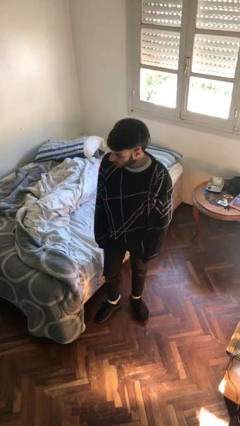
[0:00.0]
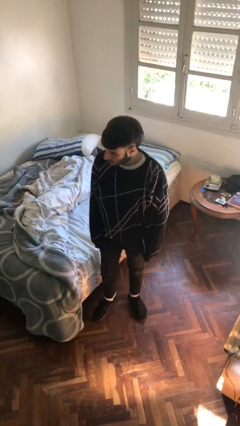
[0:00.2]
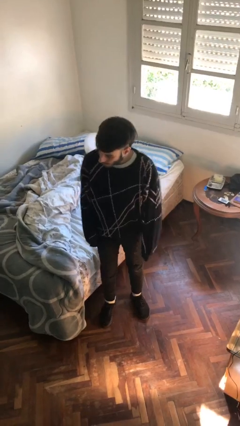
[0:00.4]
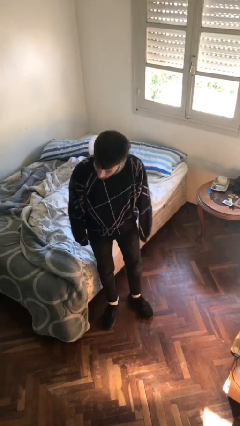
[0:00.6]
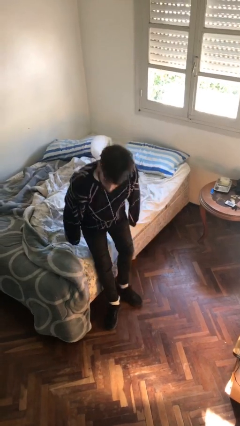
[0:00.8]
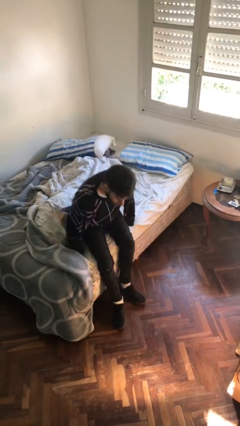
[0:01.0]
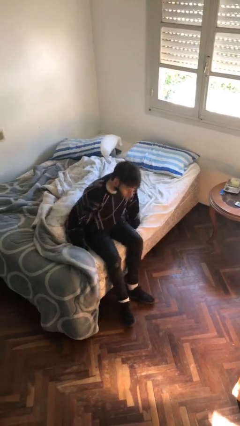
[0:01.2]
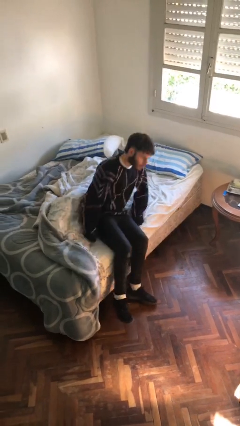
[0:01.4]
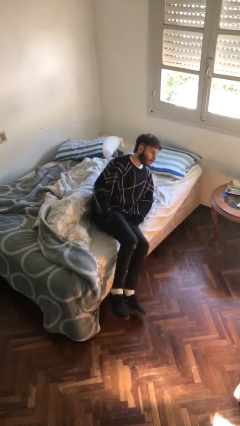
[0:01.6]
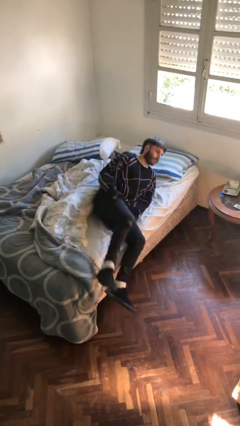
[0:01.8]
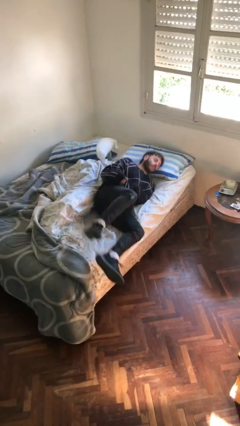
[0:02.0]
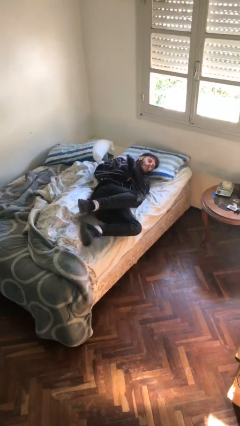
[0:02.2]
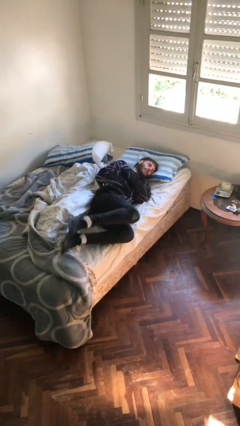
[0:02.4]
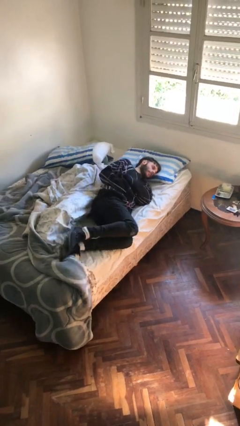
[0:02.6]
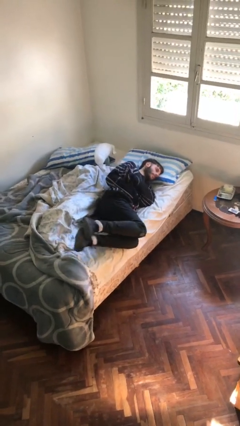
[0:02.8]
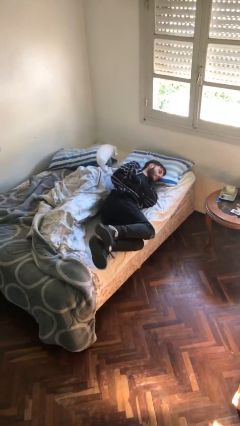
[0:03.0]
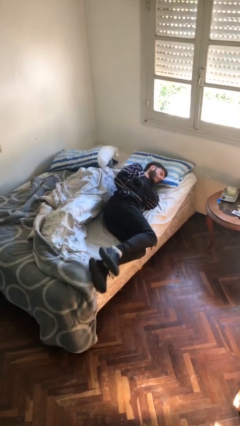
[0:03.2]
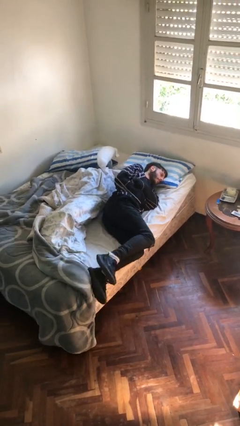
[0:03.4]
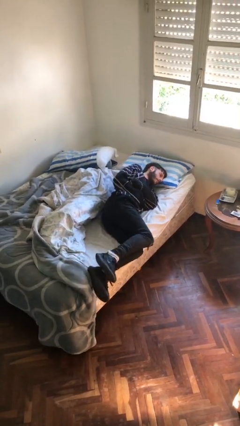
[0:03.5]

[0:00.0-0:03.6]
person lies down on bed

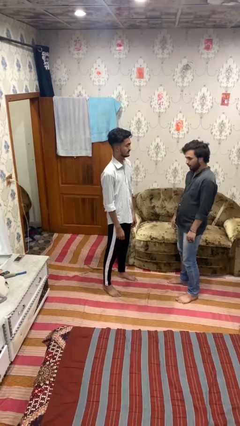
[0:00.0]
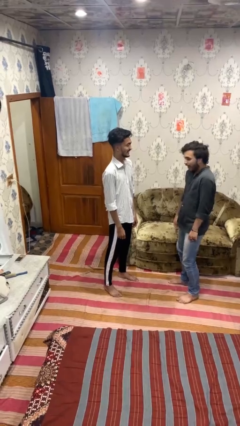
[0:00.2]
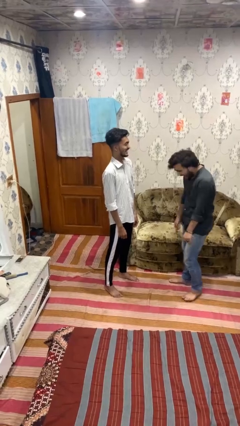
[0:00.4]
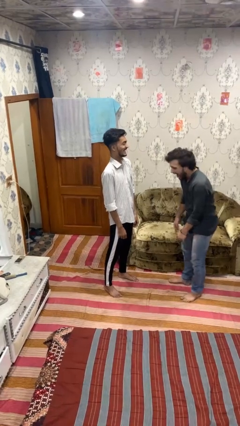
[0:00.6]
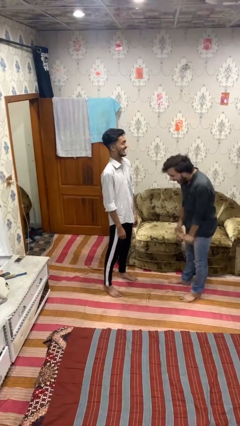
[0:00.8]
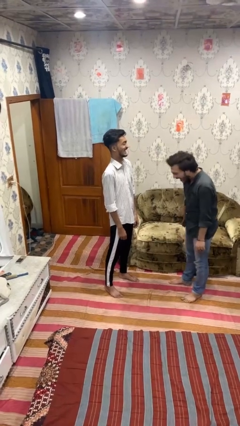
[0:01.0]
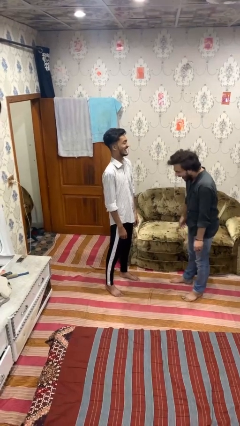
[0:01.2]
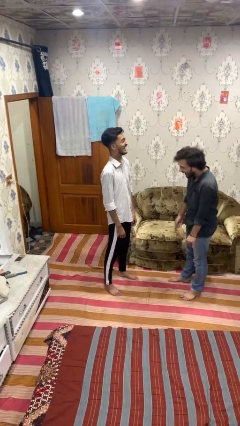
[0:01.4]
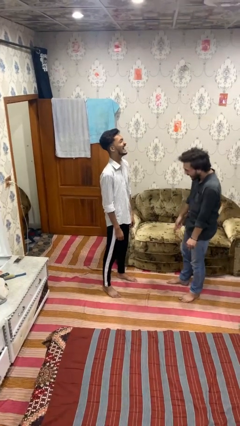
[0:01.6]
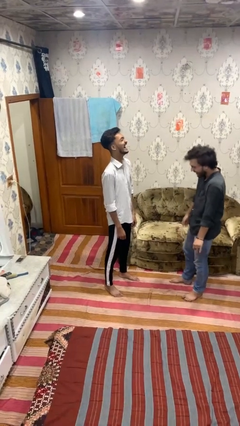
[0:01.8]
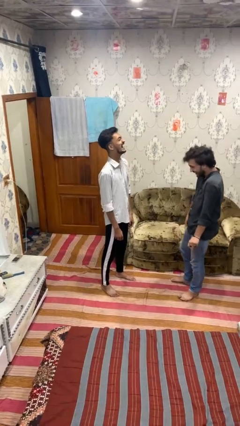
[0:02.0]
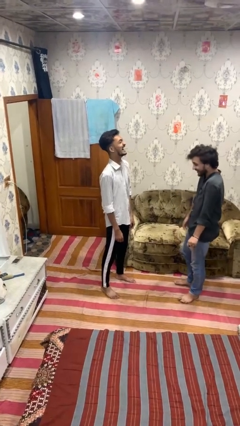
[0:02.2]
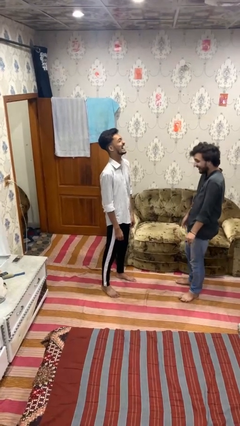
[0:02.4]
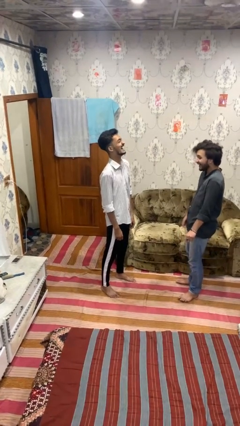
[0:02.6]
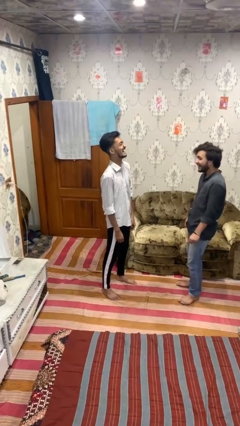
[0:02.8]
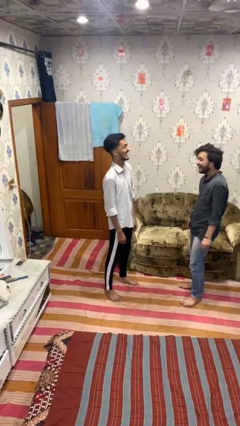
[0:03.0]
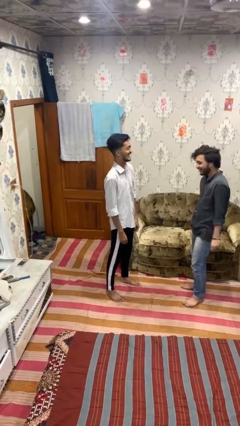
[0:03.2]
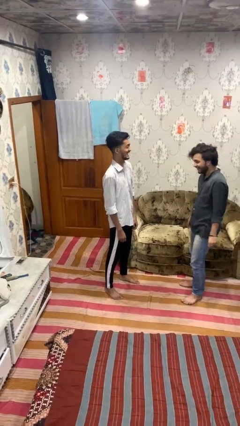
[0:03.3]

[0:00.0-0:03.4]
person laughs with person

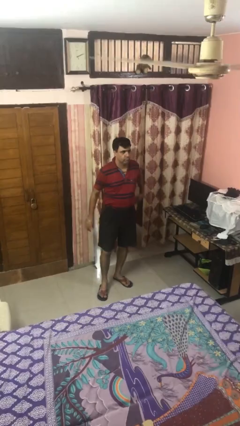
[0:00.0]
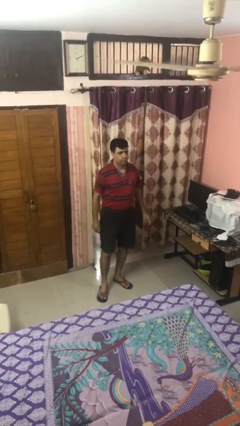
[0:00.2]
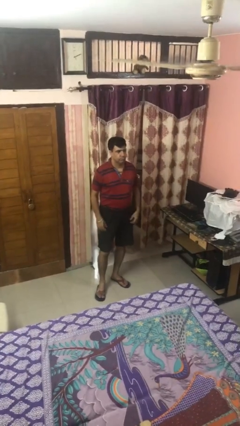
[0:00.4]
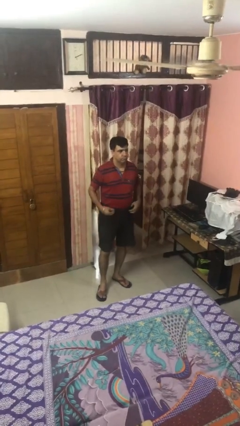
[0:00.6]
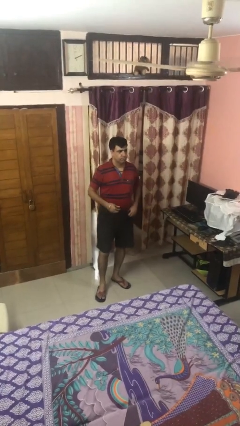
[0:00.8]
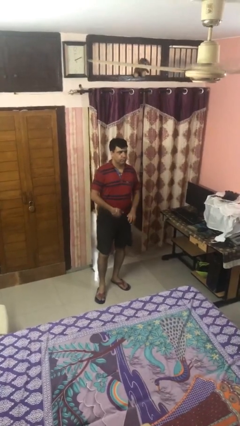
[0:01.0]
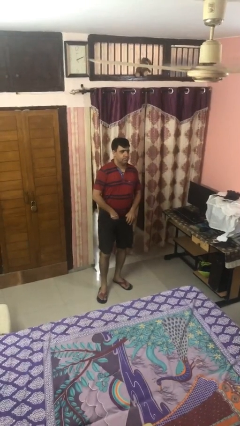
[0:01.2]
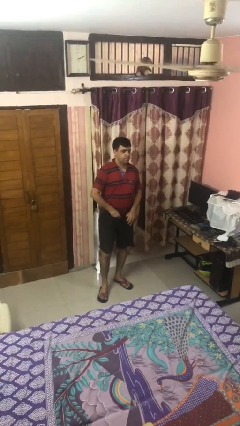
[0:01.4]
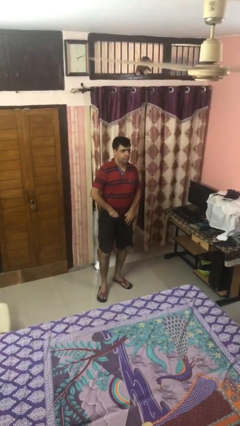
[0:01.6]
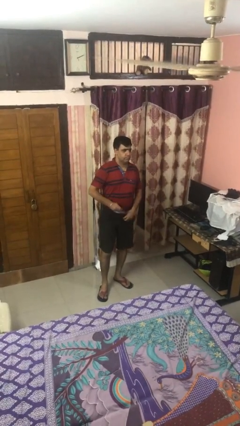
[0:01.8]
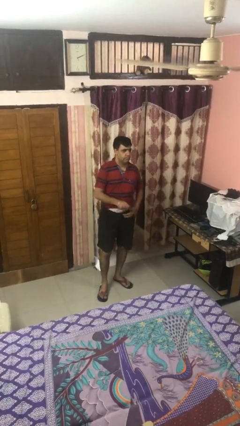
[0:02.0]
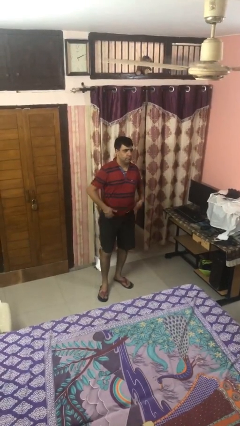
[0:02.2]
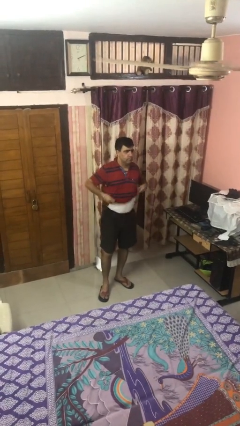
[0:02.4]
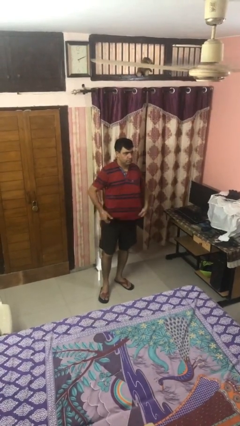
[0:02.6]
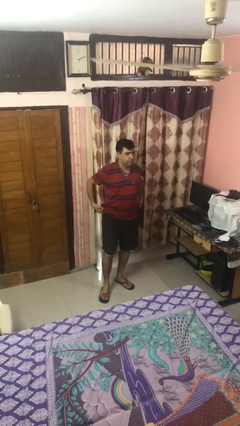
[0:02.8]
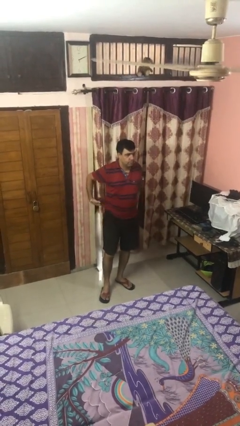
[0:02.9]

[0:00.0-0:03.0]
person untucks shirt

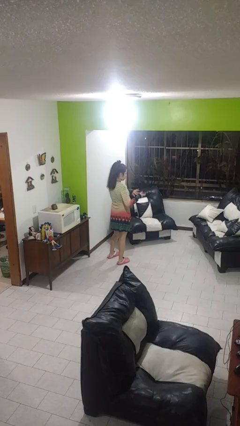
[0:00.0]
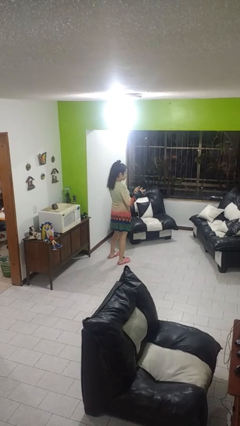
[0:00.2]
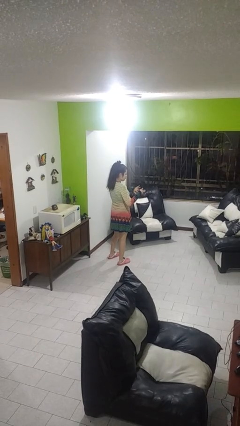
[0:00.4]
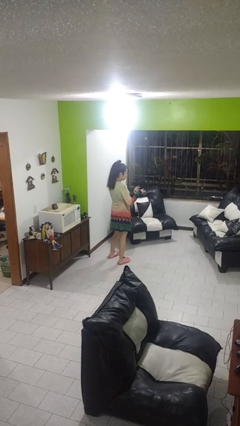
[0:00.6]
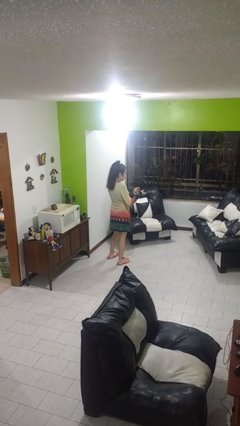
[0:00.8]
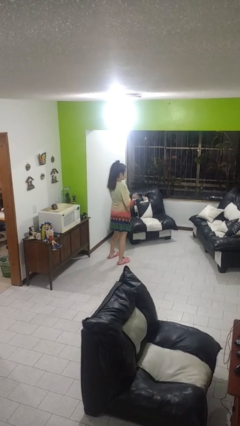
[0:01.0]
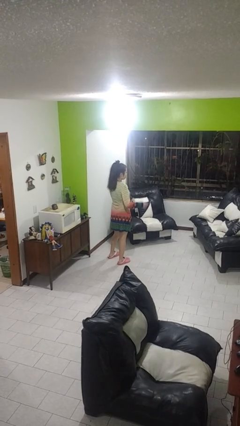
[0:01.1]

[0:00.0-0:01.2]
person clips fingernails

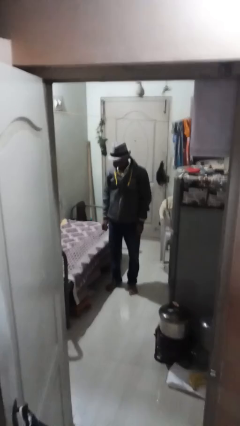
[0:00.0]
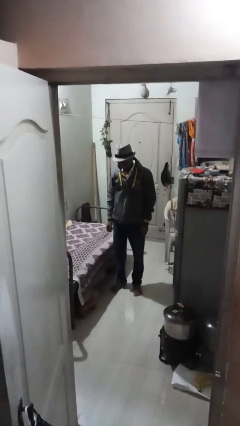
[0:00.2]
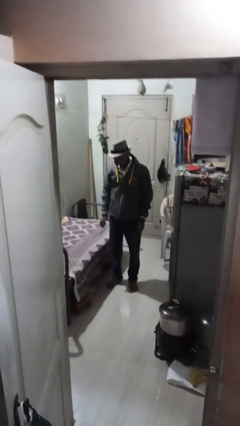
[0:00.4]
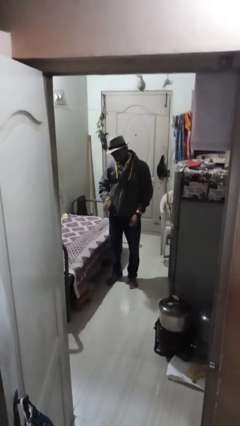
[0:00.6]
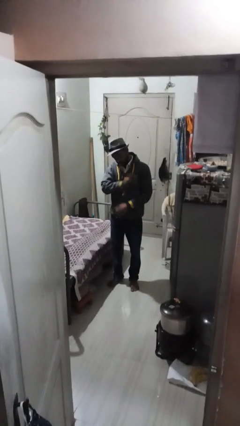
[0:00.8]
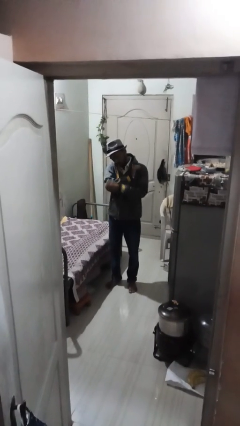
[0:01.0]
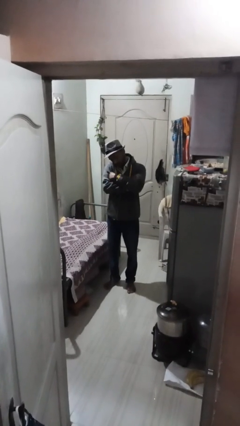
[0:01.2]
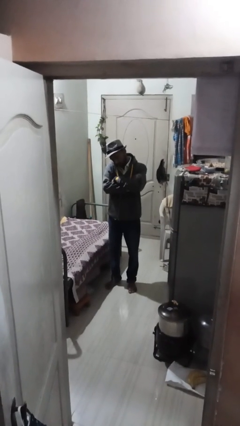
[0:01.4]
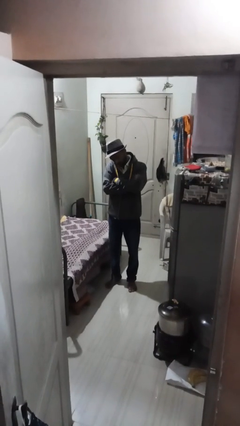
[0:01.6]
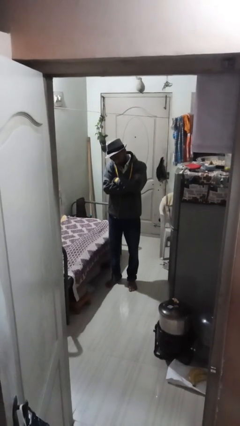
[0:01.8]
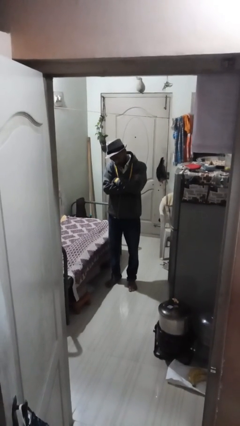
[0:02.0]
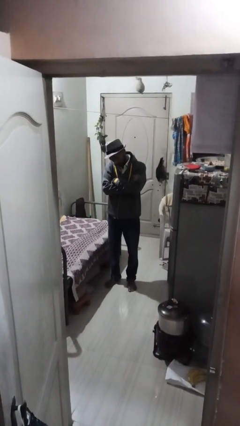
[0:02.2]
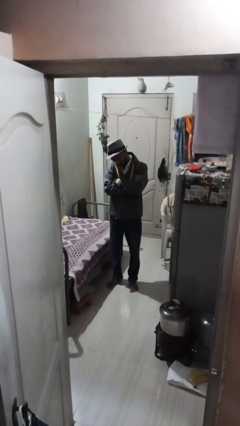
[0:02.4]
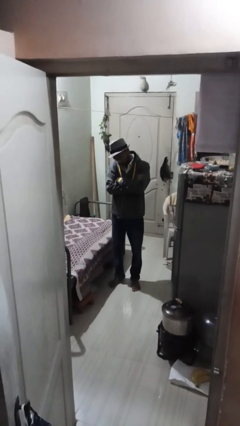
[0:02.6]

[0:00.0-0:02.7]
person crosses arms

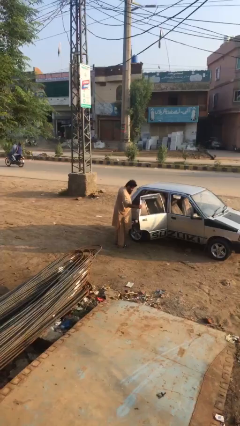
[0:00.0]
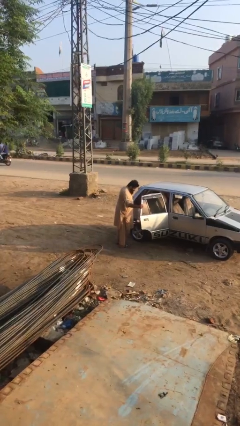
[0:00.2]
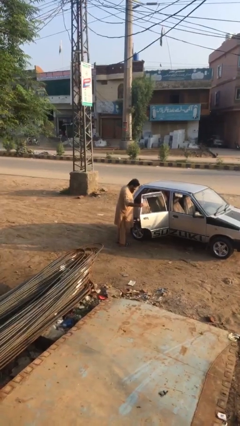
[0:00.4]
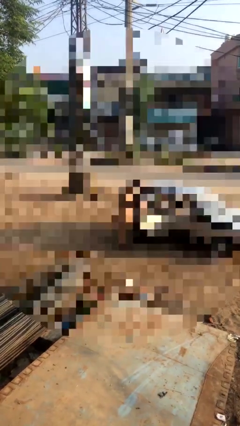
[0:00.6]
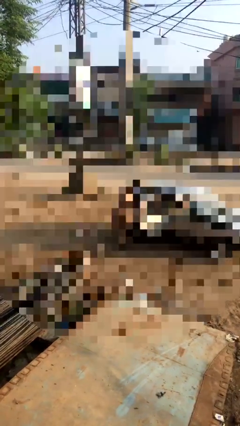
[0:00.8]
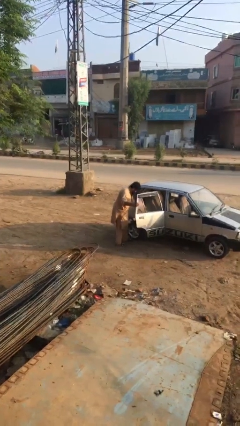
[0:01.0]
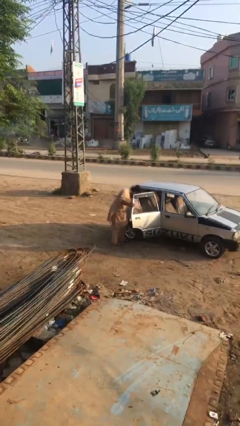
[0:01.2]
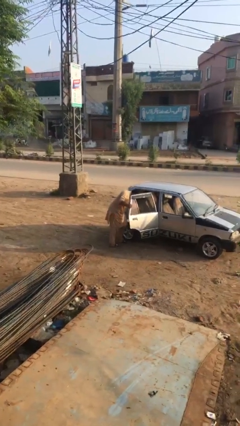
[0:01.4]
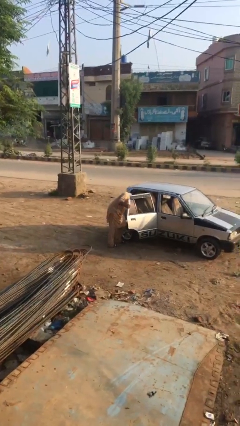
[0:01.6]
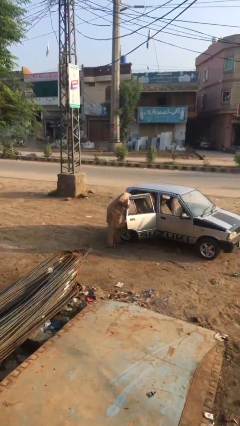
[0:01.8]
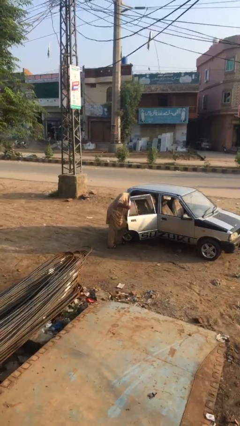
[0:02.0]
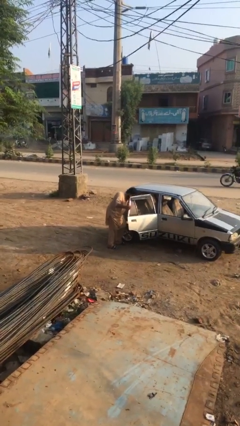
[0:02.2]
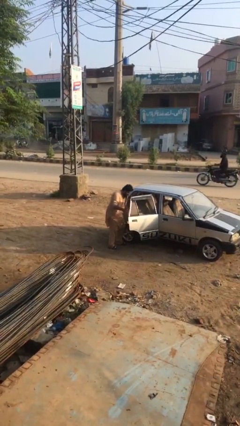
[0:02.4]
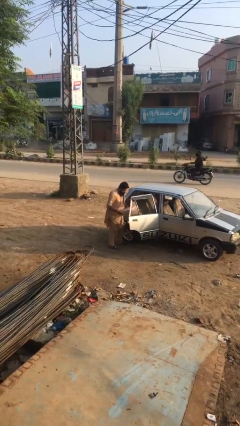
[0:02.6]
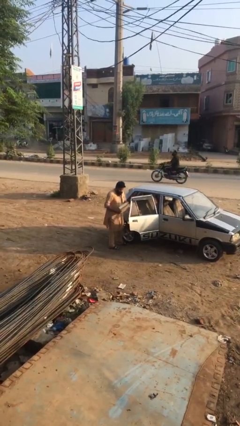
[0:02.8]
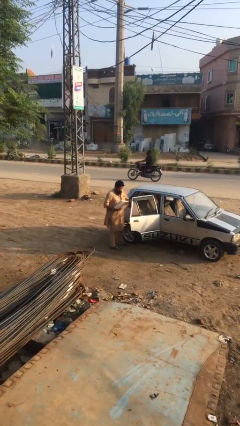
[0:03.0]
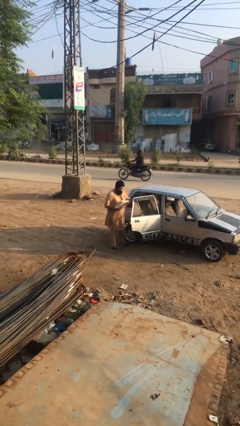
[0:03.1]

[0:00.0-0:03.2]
person unloads car

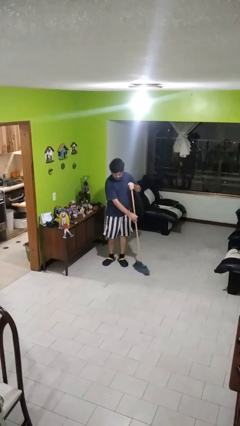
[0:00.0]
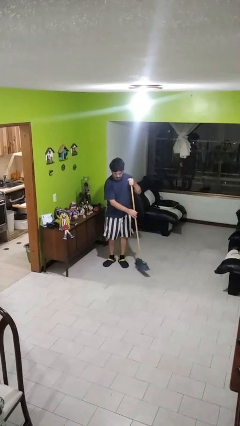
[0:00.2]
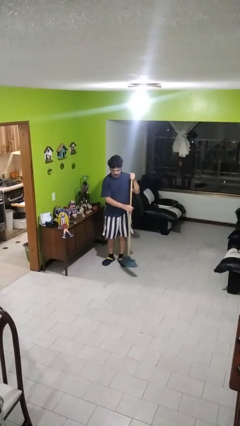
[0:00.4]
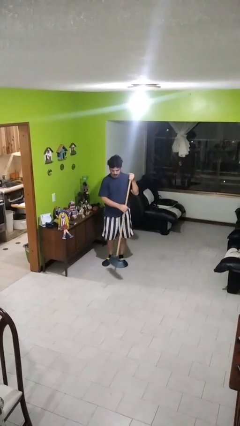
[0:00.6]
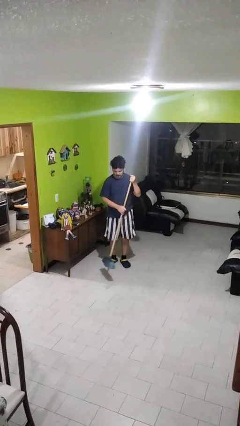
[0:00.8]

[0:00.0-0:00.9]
person sweeps floor
